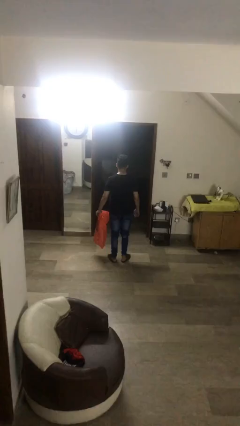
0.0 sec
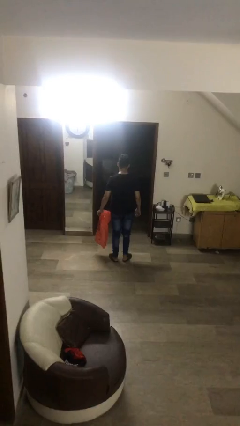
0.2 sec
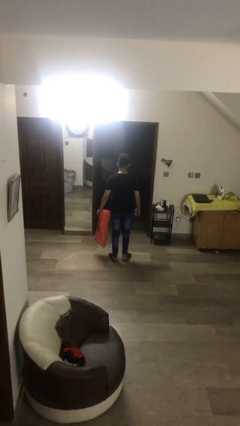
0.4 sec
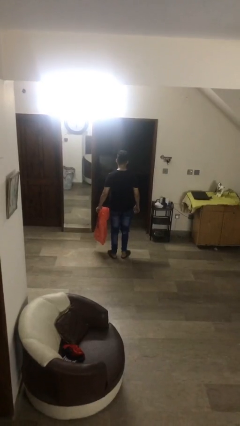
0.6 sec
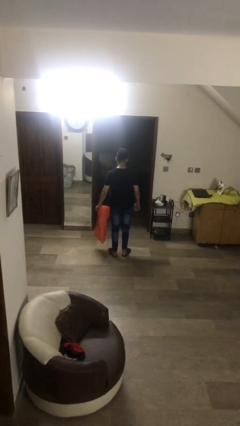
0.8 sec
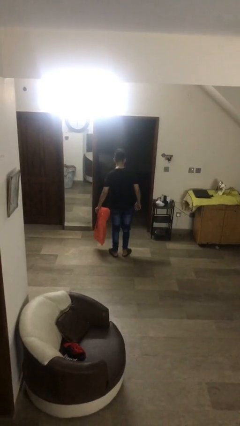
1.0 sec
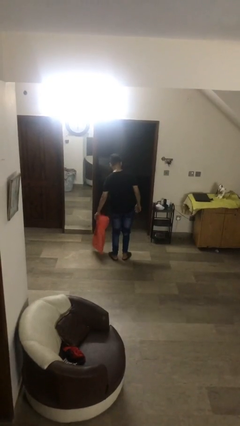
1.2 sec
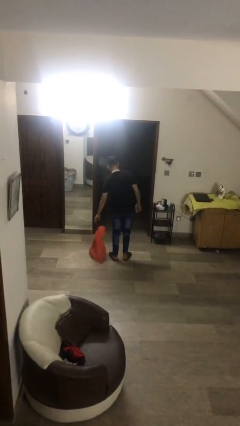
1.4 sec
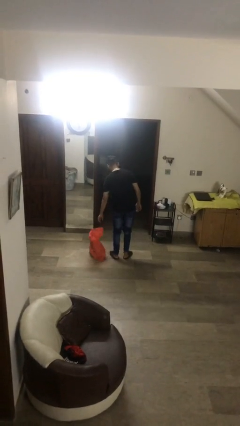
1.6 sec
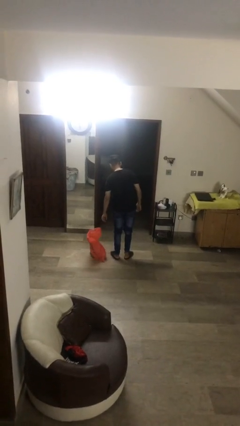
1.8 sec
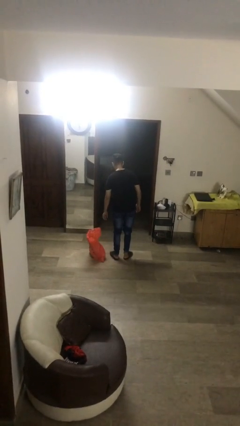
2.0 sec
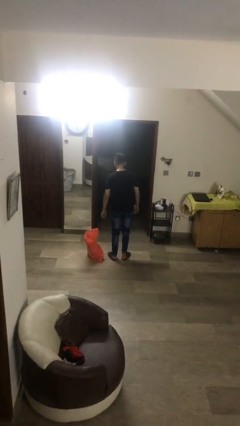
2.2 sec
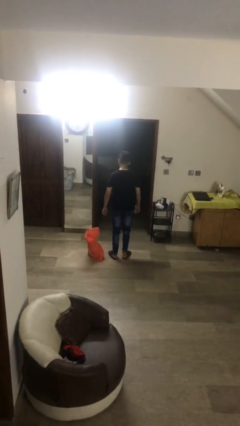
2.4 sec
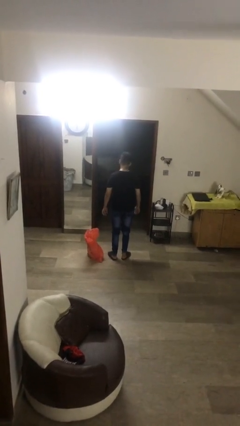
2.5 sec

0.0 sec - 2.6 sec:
person puts down object on floor

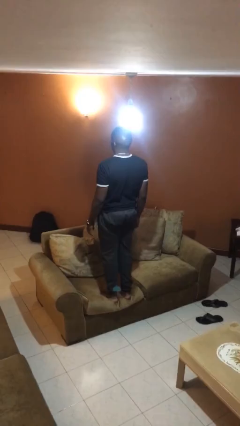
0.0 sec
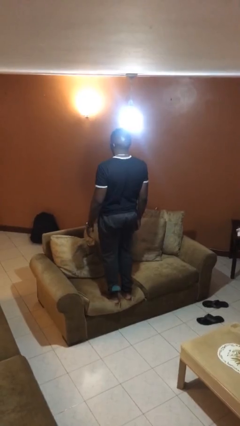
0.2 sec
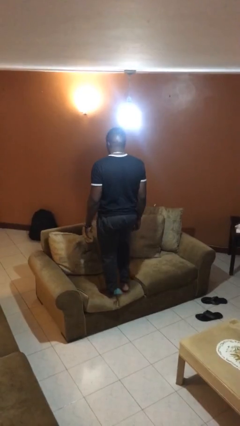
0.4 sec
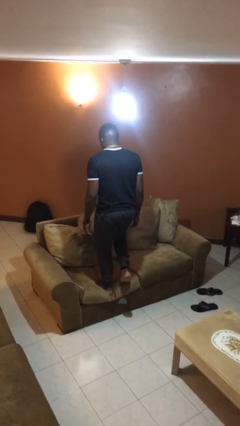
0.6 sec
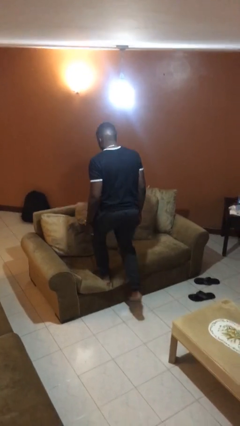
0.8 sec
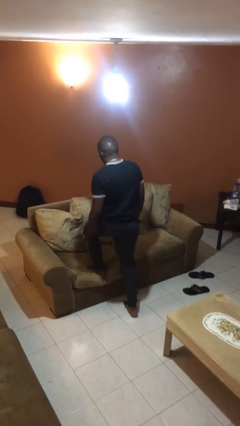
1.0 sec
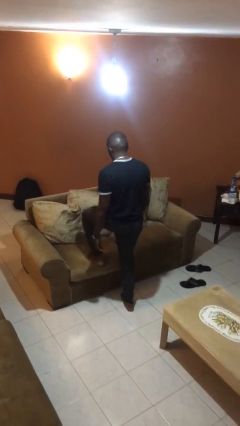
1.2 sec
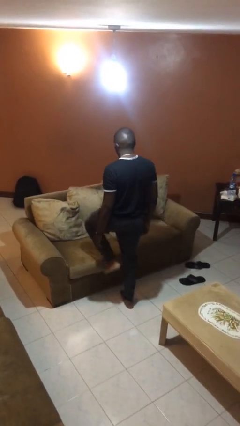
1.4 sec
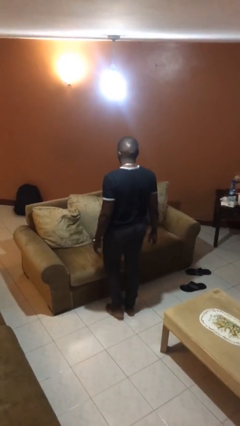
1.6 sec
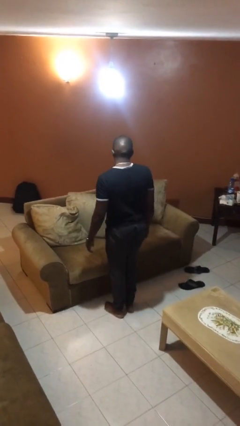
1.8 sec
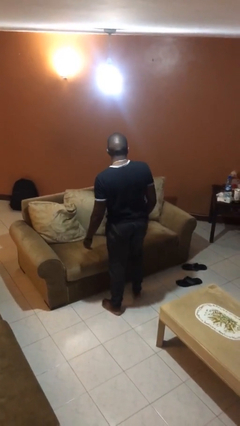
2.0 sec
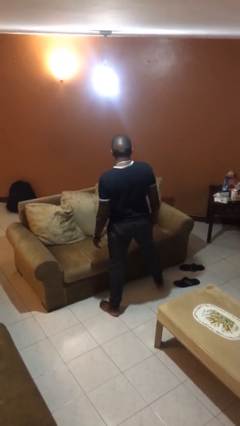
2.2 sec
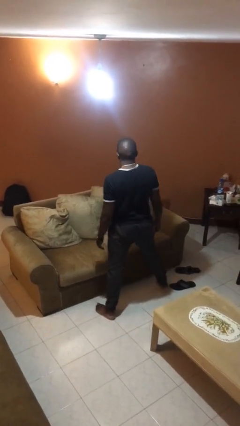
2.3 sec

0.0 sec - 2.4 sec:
person climbs off couch

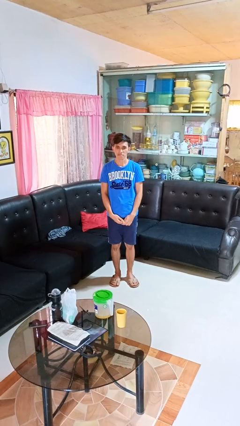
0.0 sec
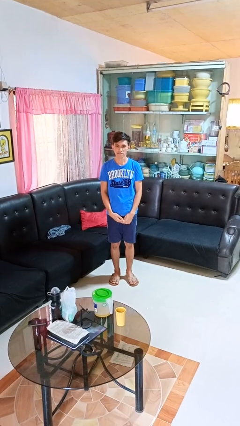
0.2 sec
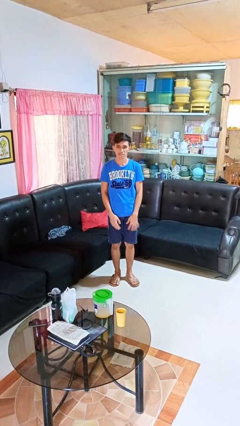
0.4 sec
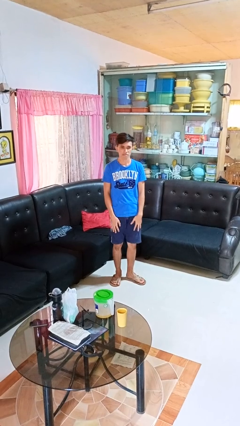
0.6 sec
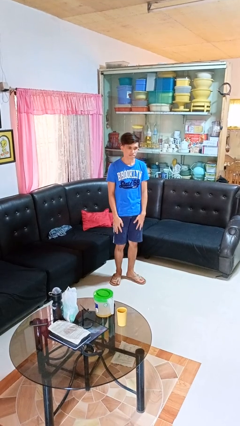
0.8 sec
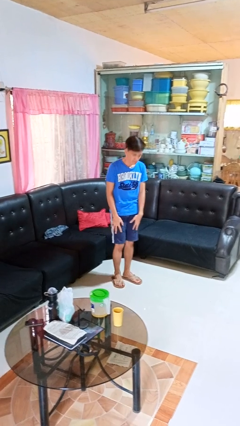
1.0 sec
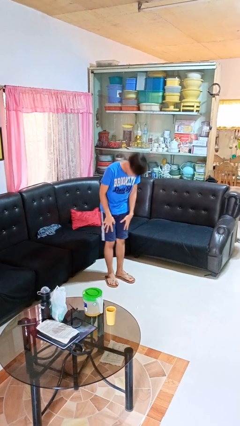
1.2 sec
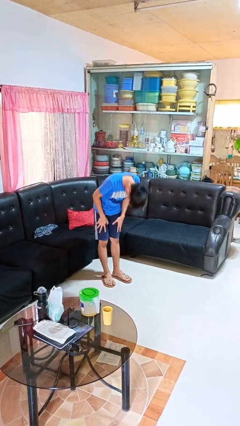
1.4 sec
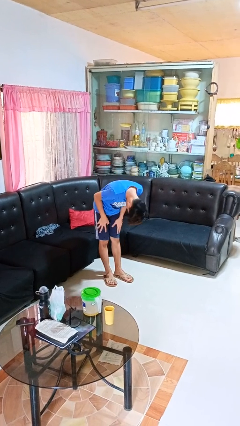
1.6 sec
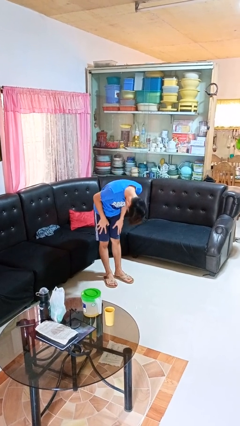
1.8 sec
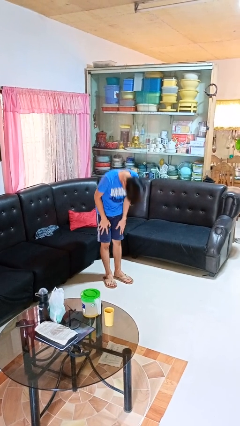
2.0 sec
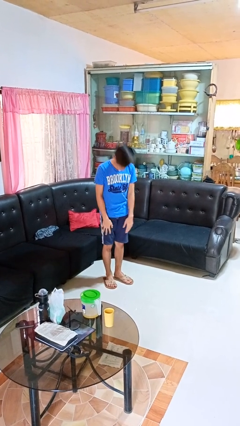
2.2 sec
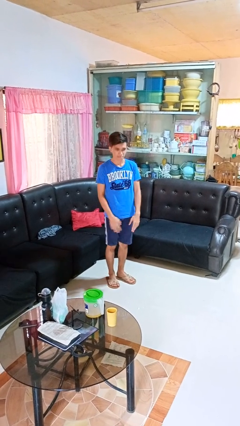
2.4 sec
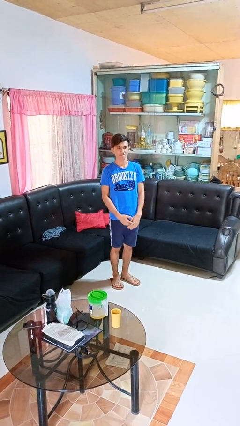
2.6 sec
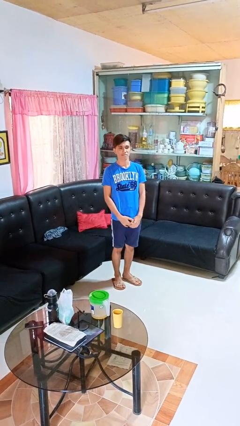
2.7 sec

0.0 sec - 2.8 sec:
person bows

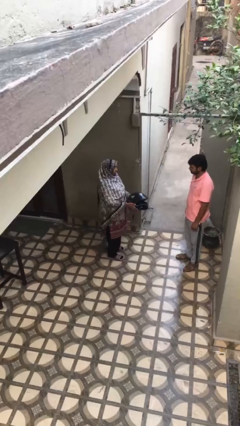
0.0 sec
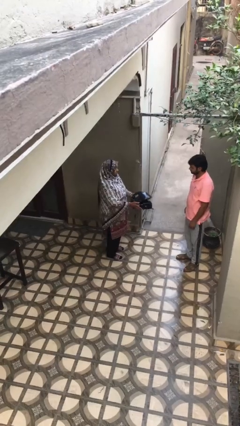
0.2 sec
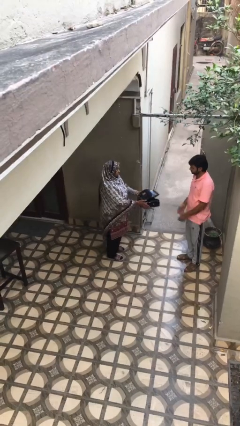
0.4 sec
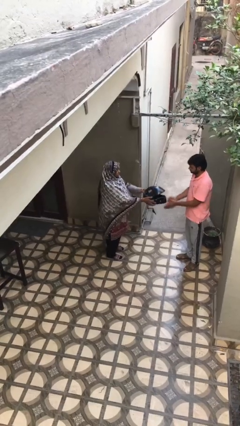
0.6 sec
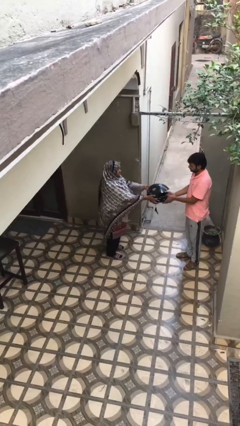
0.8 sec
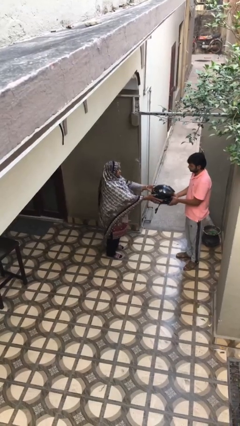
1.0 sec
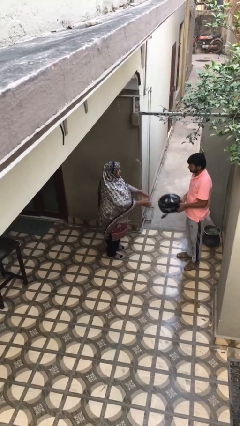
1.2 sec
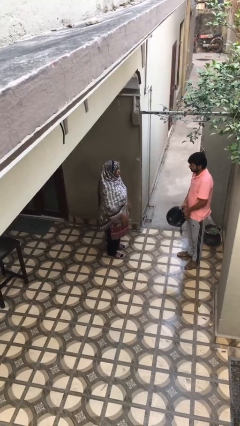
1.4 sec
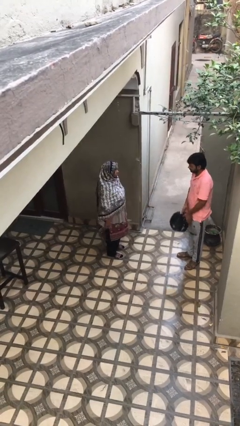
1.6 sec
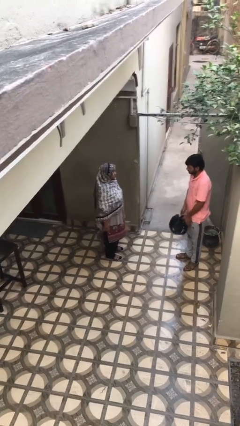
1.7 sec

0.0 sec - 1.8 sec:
person transfers object to person

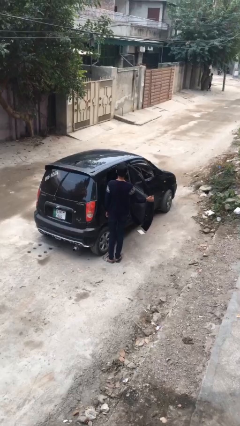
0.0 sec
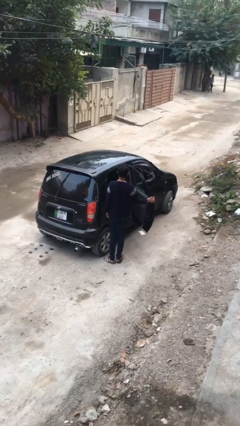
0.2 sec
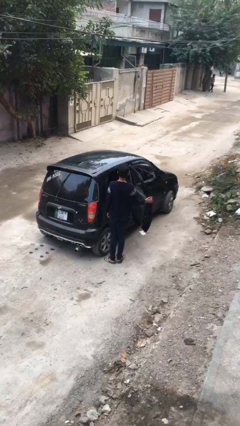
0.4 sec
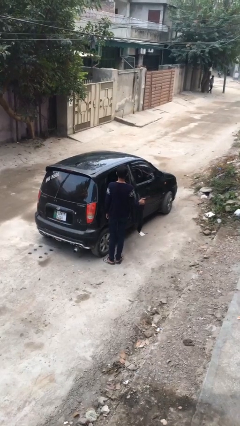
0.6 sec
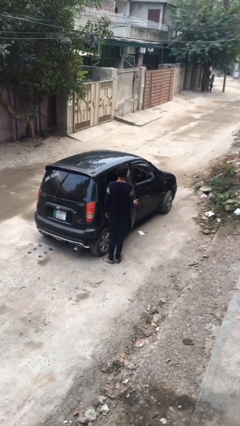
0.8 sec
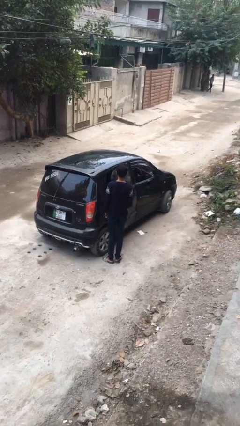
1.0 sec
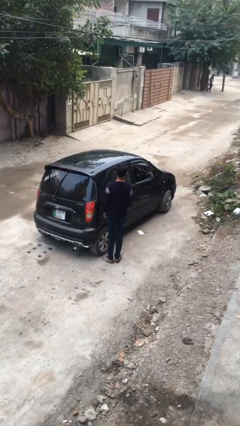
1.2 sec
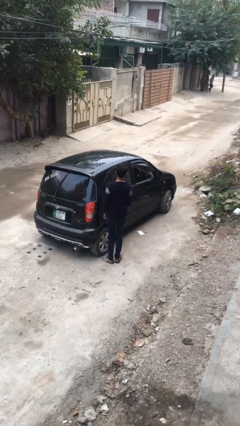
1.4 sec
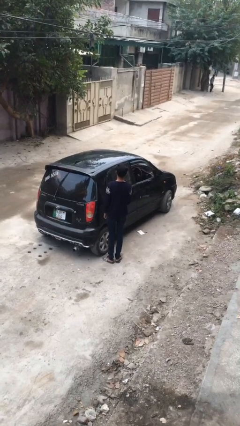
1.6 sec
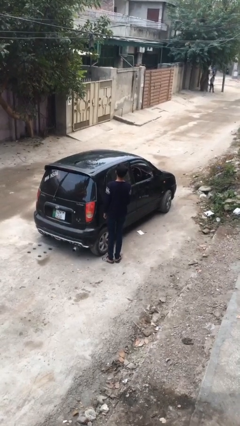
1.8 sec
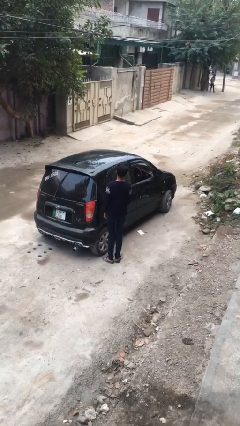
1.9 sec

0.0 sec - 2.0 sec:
person closes car door

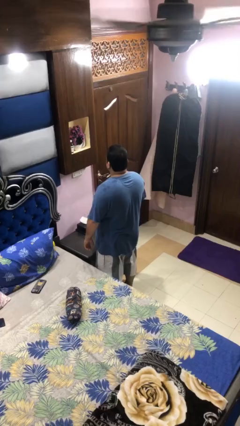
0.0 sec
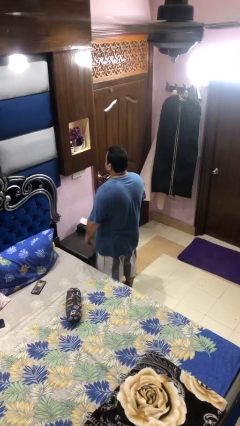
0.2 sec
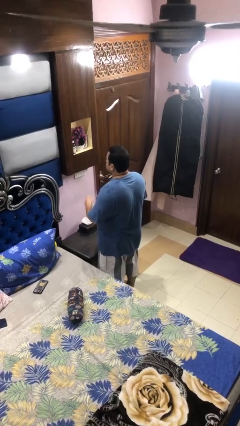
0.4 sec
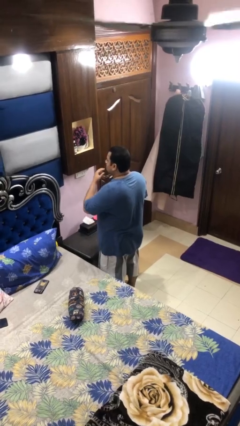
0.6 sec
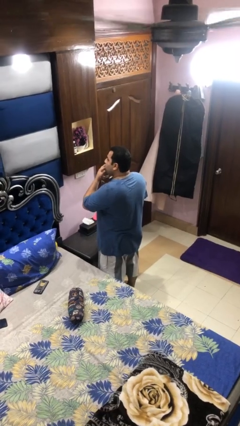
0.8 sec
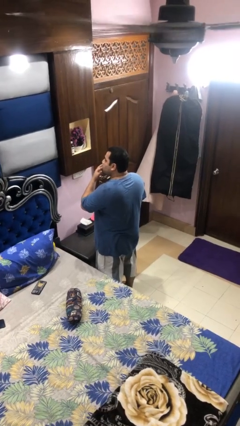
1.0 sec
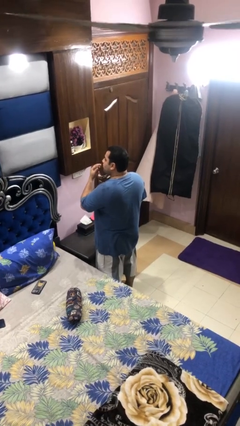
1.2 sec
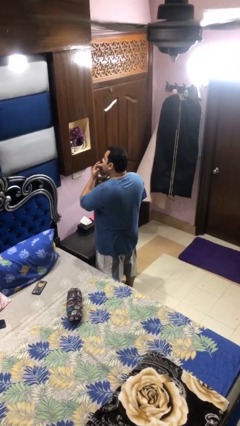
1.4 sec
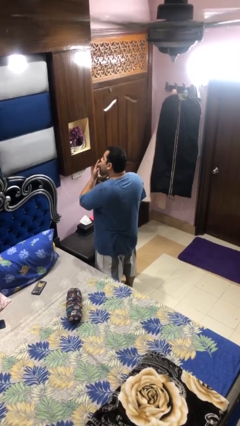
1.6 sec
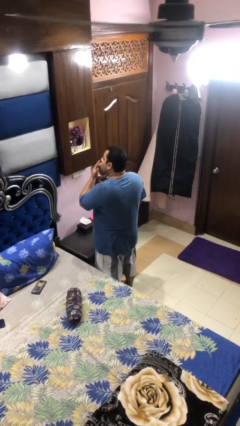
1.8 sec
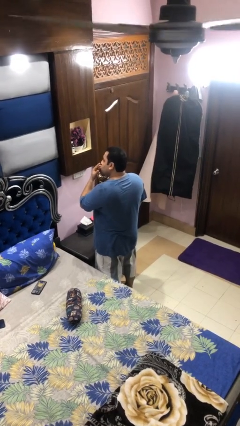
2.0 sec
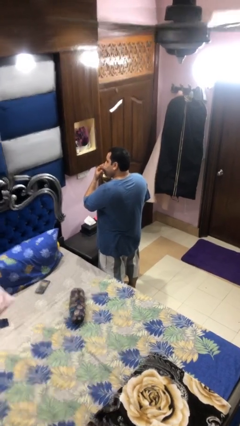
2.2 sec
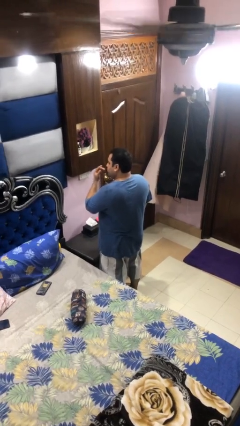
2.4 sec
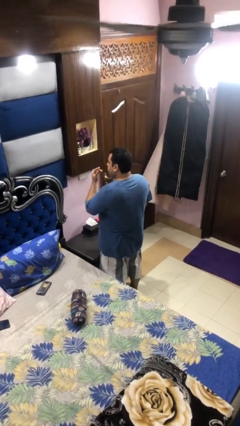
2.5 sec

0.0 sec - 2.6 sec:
person licks fingers

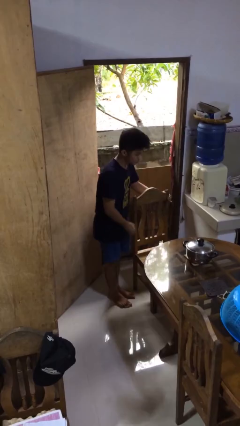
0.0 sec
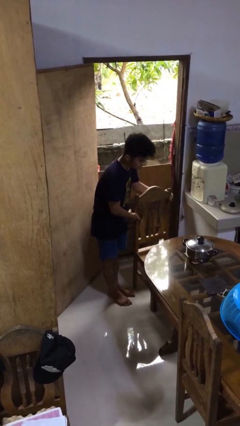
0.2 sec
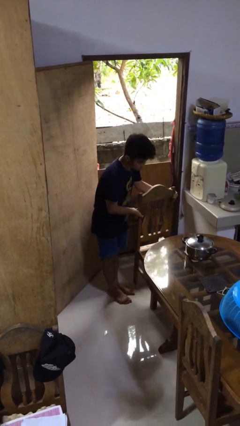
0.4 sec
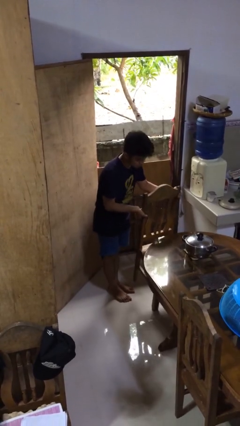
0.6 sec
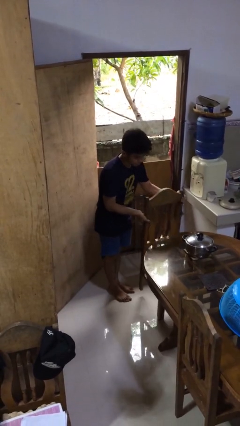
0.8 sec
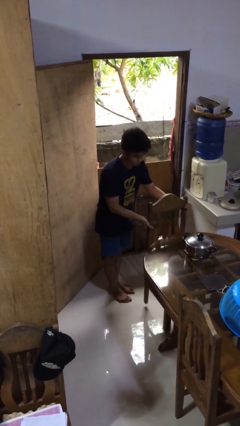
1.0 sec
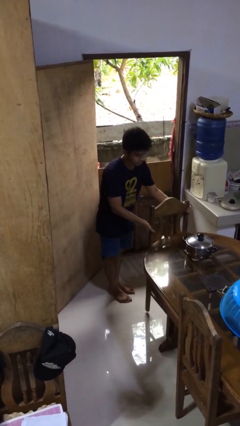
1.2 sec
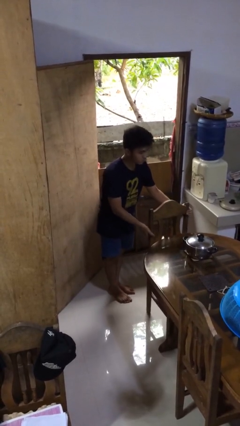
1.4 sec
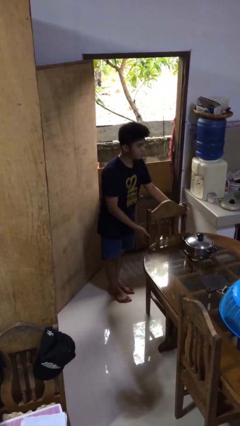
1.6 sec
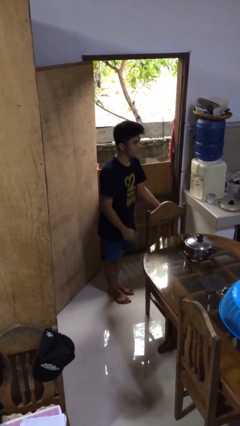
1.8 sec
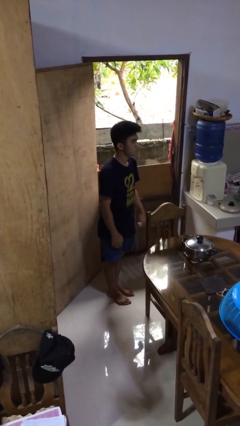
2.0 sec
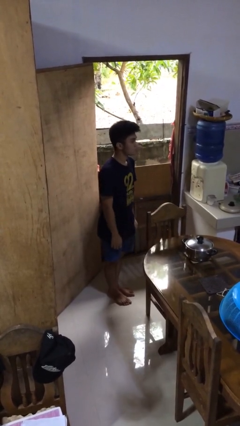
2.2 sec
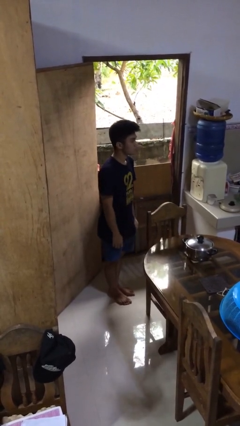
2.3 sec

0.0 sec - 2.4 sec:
person pushes in chair

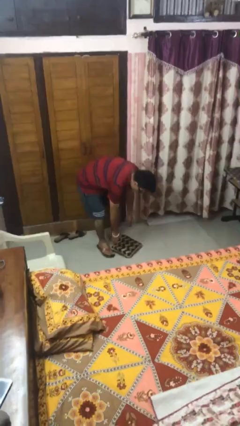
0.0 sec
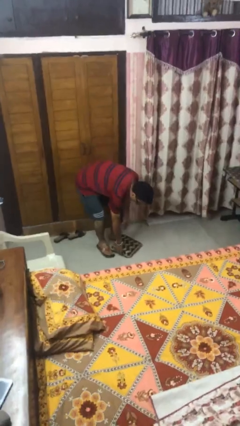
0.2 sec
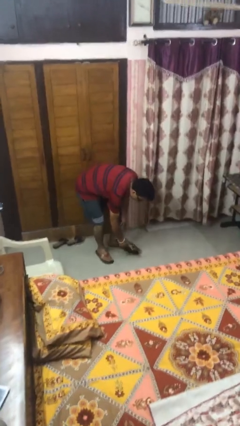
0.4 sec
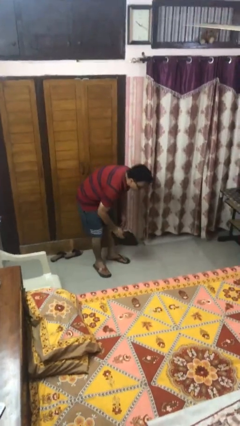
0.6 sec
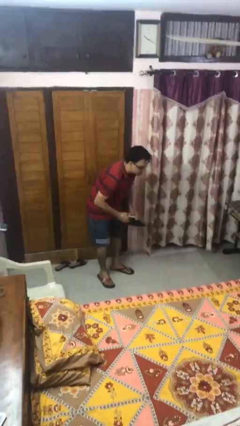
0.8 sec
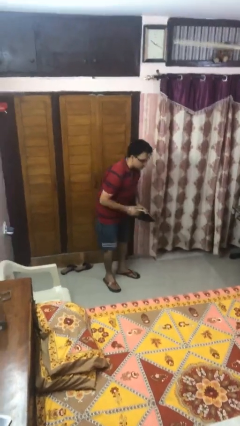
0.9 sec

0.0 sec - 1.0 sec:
person picks up object from floor
